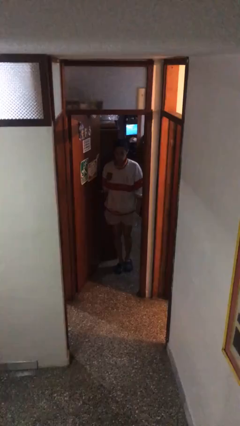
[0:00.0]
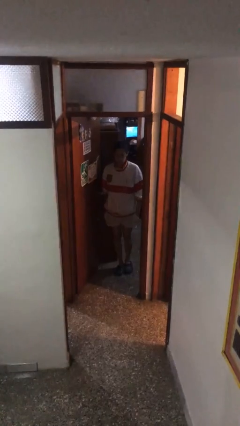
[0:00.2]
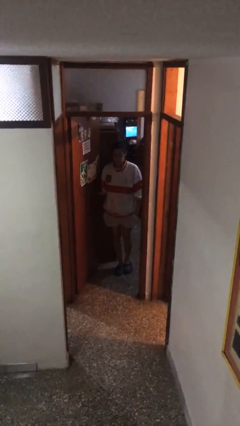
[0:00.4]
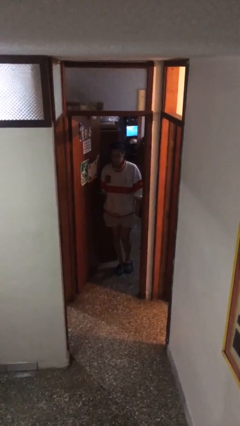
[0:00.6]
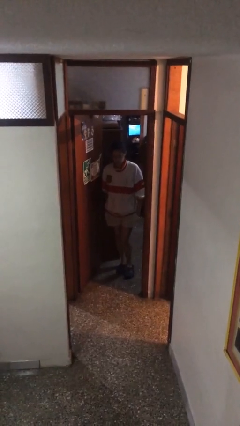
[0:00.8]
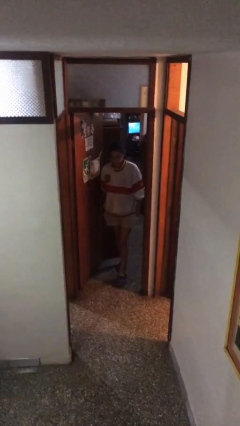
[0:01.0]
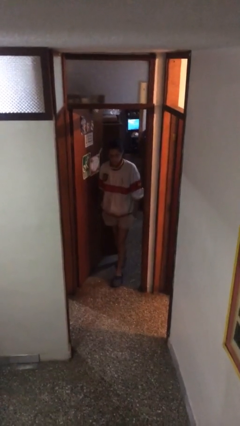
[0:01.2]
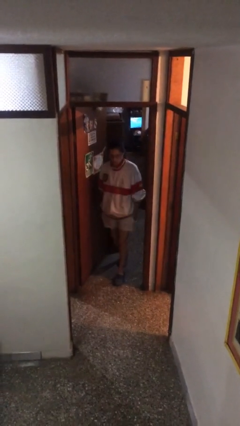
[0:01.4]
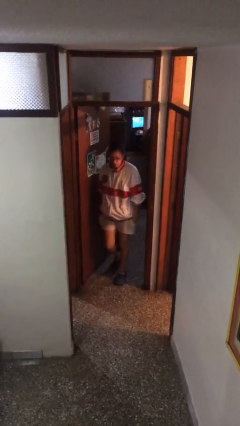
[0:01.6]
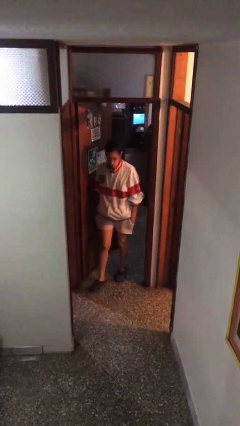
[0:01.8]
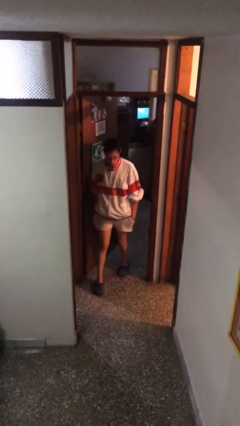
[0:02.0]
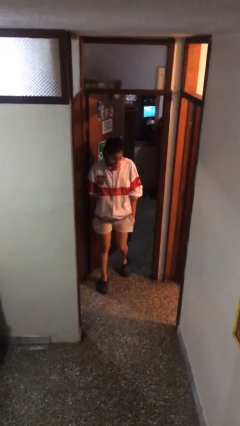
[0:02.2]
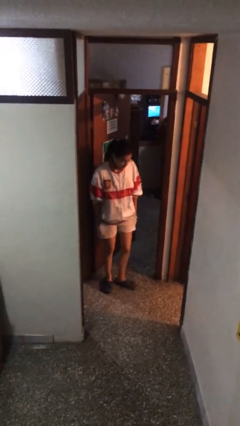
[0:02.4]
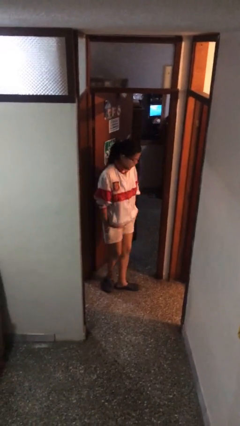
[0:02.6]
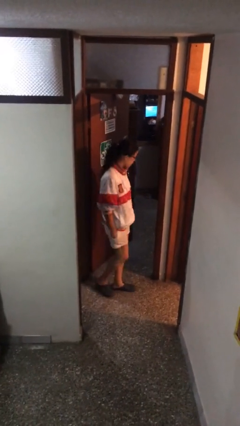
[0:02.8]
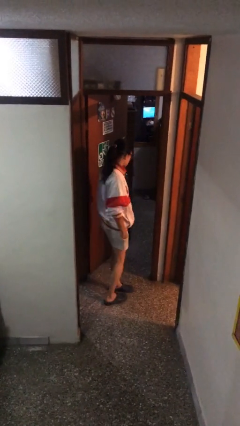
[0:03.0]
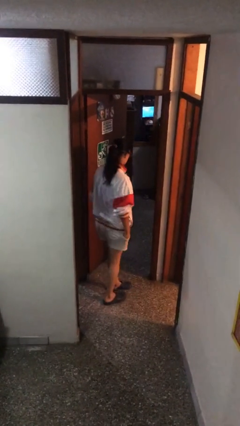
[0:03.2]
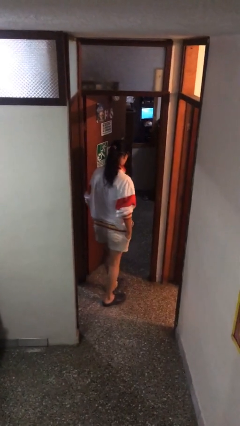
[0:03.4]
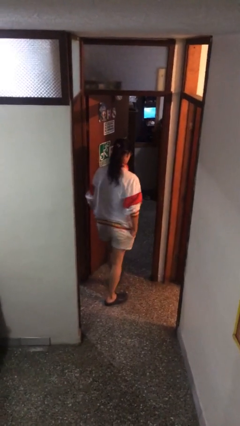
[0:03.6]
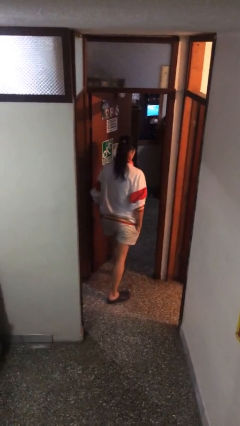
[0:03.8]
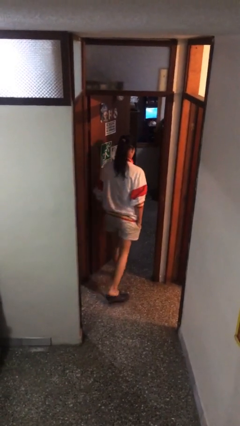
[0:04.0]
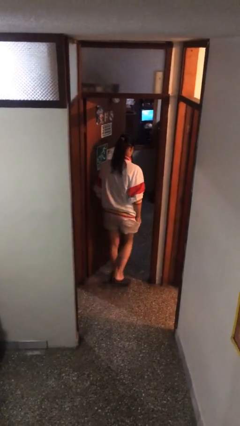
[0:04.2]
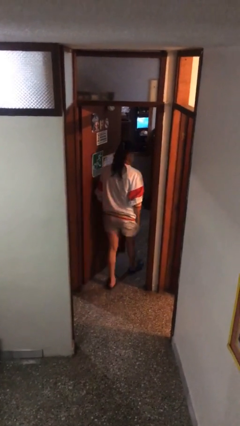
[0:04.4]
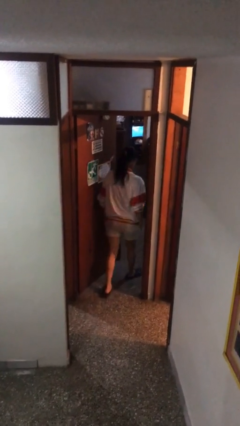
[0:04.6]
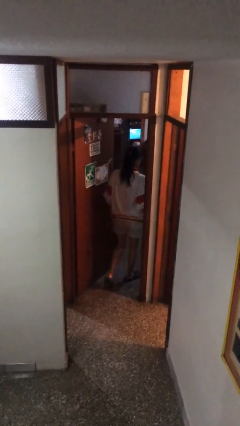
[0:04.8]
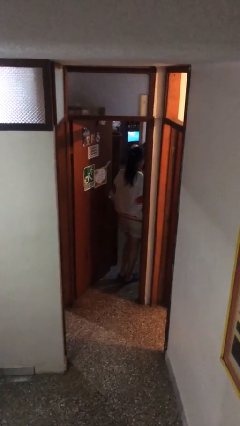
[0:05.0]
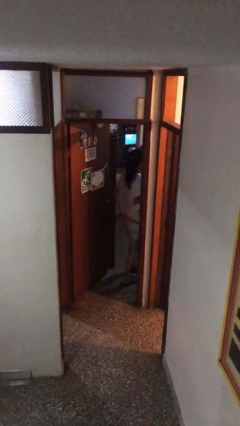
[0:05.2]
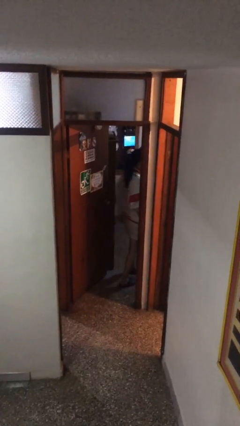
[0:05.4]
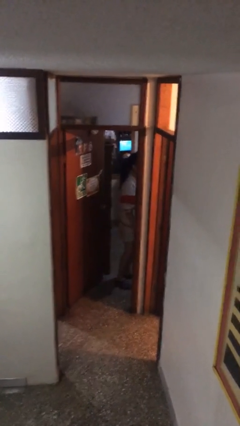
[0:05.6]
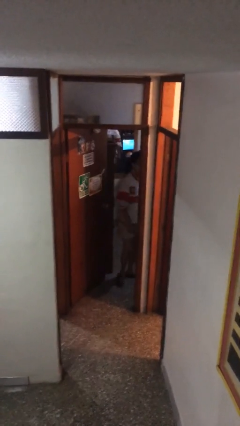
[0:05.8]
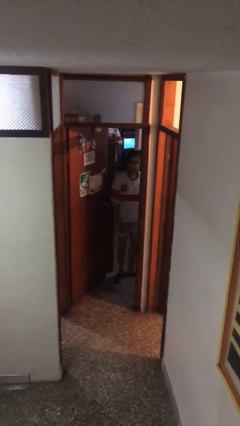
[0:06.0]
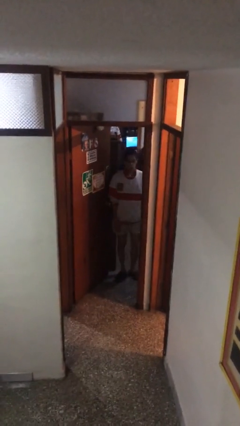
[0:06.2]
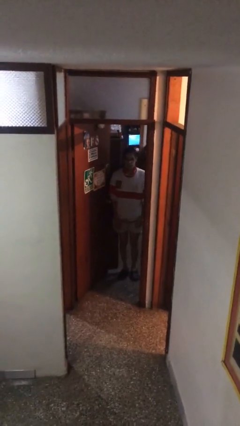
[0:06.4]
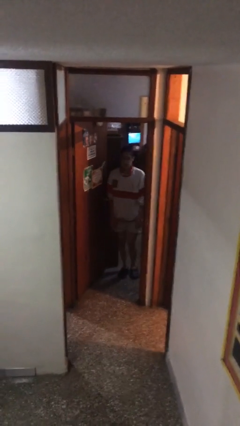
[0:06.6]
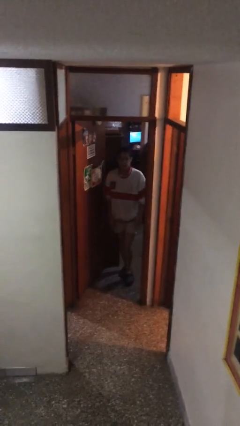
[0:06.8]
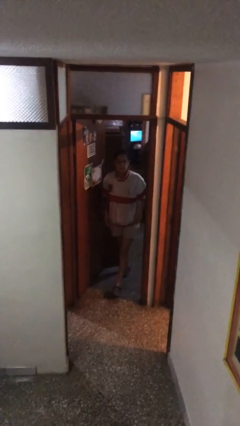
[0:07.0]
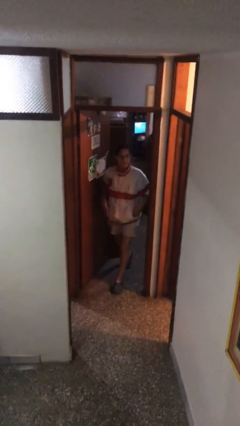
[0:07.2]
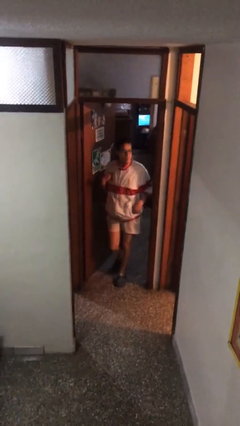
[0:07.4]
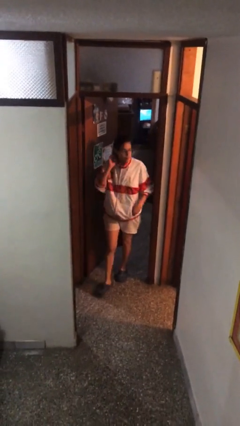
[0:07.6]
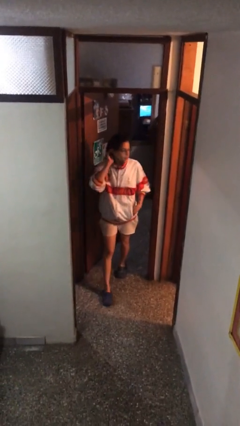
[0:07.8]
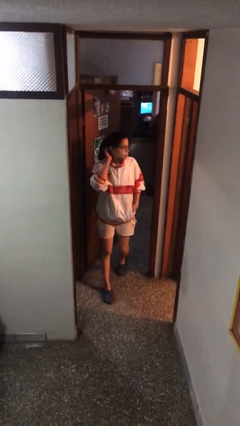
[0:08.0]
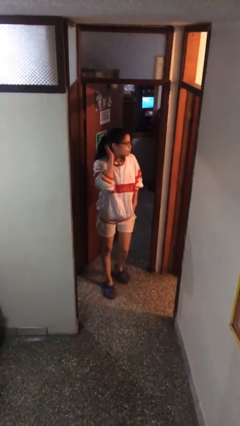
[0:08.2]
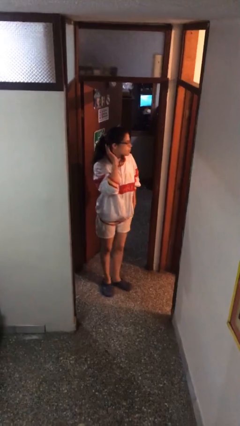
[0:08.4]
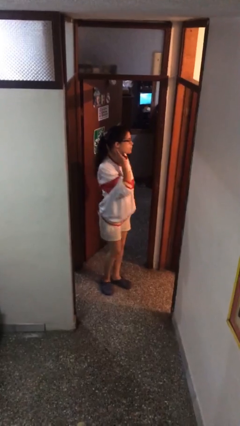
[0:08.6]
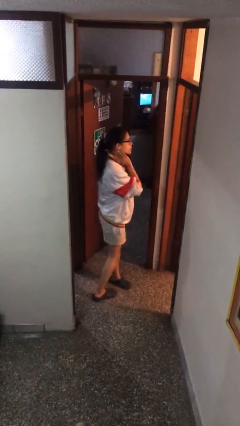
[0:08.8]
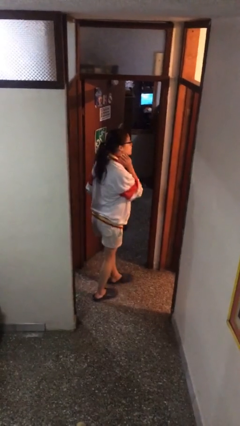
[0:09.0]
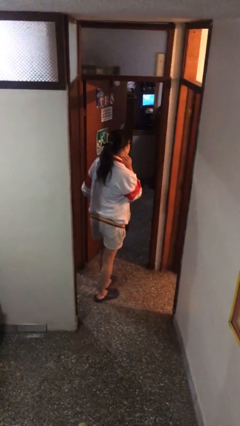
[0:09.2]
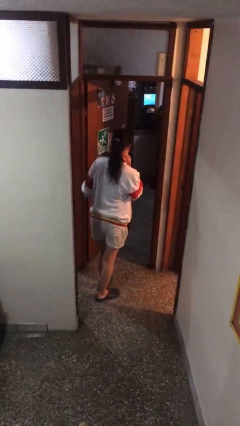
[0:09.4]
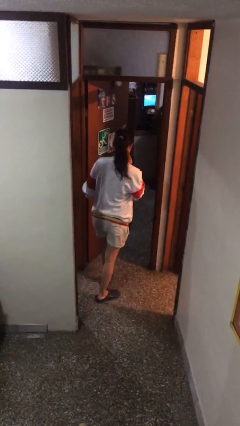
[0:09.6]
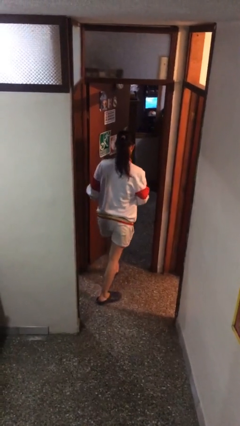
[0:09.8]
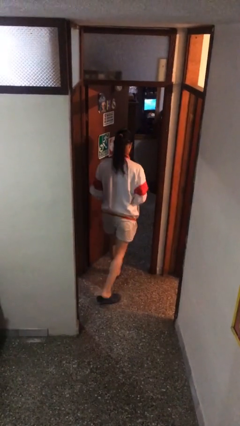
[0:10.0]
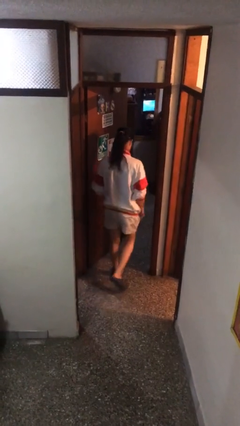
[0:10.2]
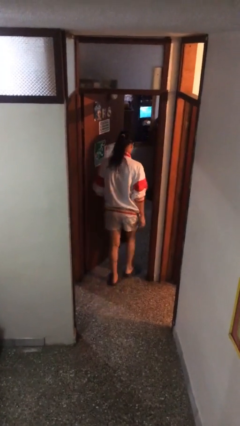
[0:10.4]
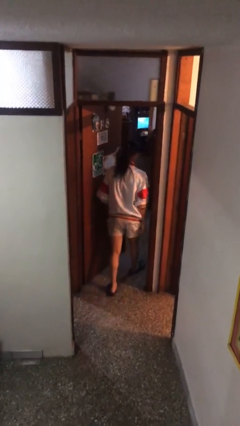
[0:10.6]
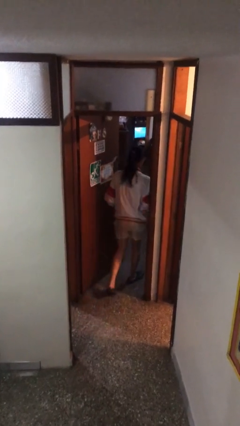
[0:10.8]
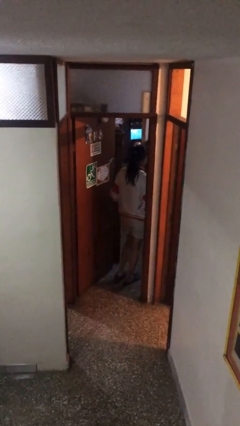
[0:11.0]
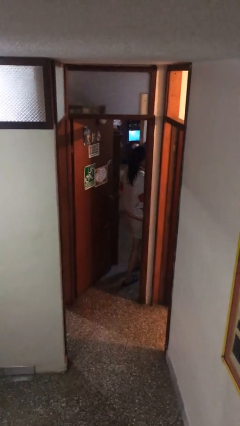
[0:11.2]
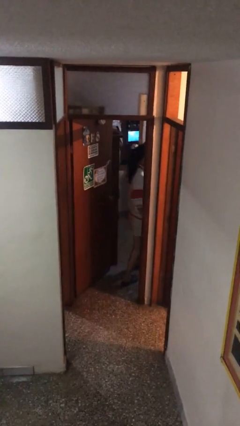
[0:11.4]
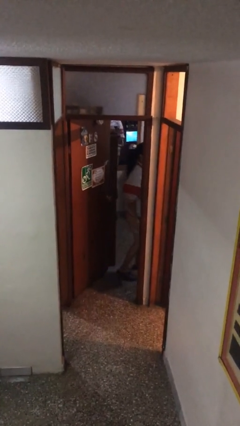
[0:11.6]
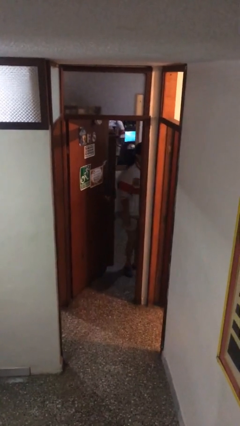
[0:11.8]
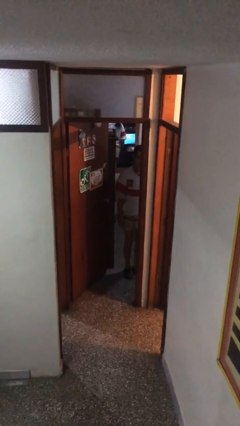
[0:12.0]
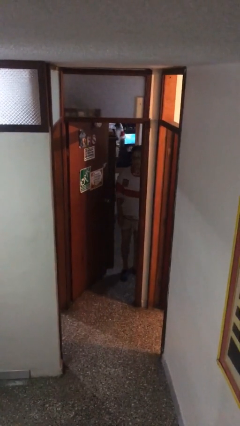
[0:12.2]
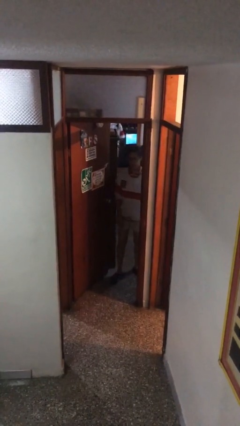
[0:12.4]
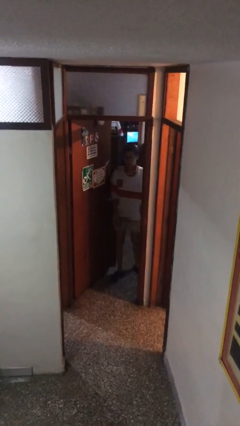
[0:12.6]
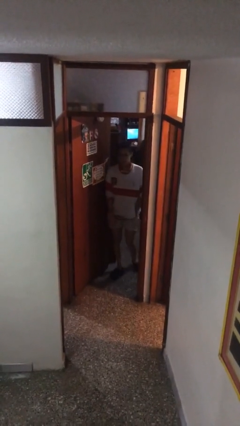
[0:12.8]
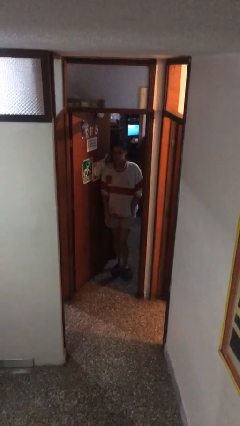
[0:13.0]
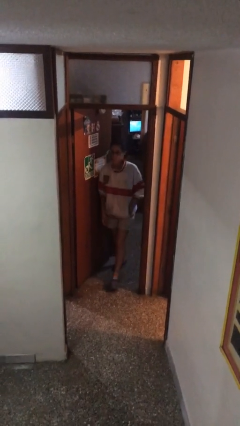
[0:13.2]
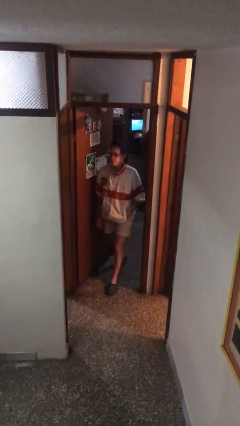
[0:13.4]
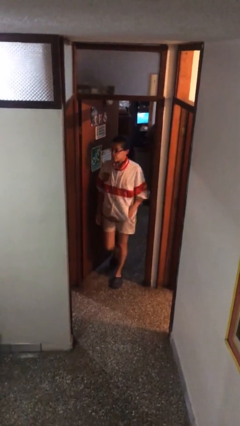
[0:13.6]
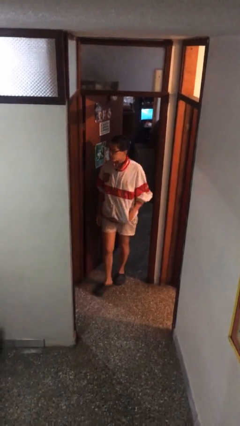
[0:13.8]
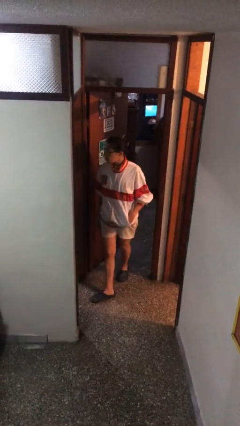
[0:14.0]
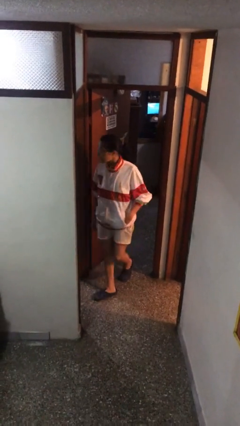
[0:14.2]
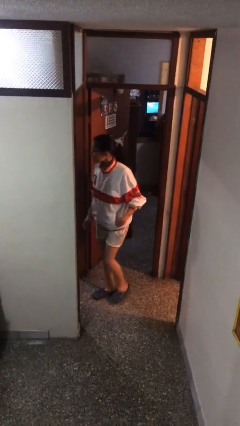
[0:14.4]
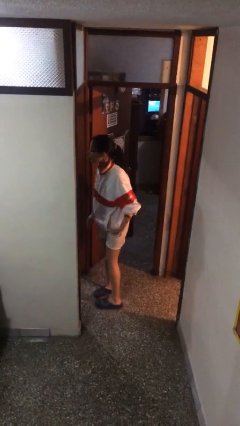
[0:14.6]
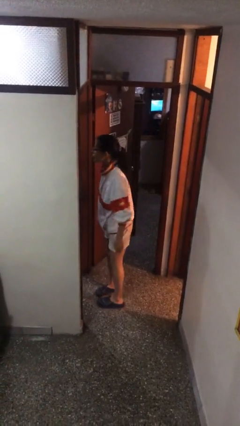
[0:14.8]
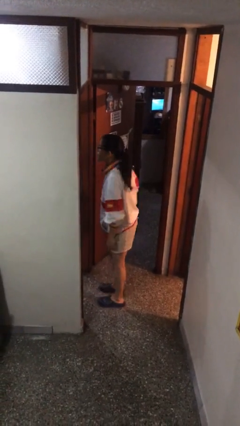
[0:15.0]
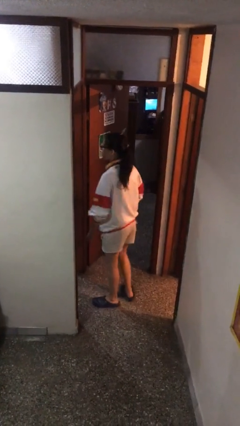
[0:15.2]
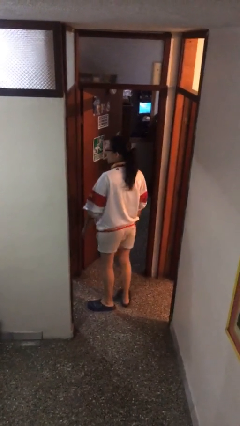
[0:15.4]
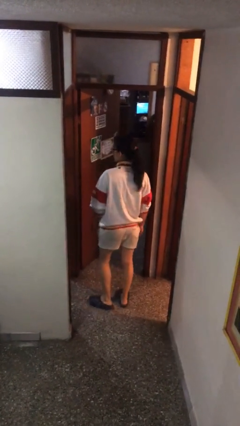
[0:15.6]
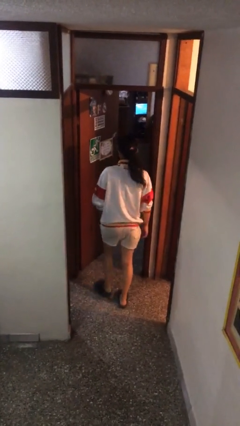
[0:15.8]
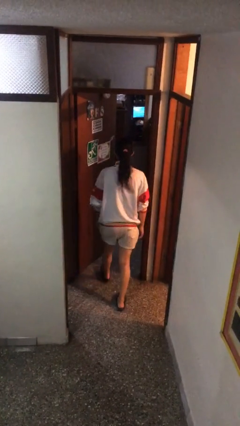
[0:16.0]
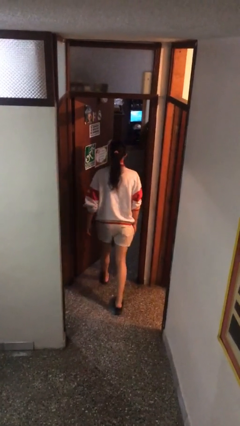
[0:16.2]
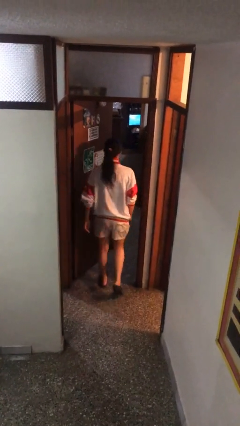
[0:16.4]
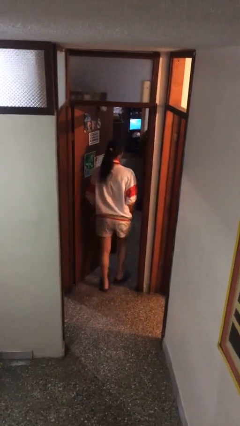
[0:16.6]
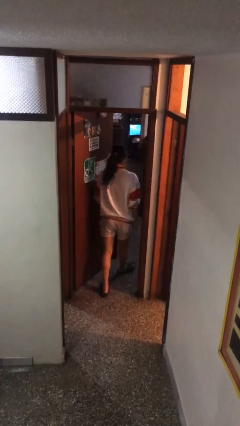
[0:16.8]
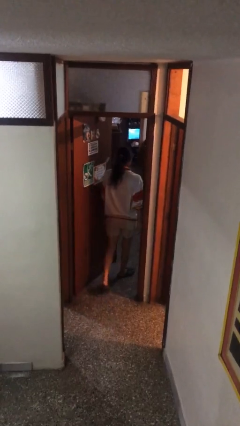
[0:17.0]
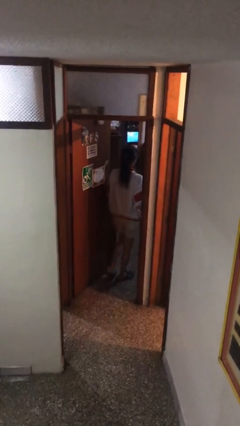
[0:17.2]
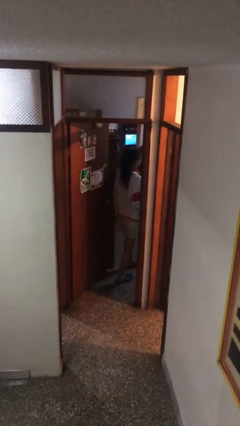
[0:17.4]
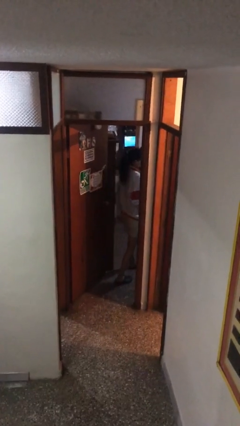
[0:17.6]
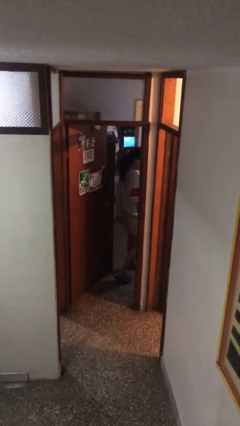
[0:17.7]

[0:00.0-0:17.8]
person texts on phone

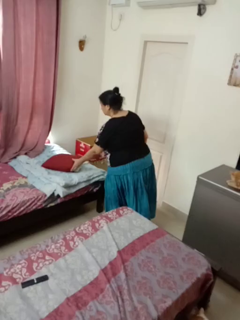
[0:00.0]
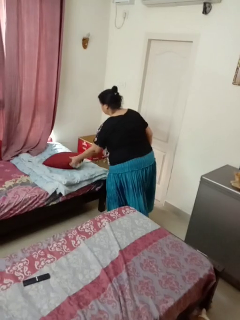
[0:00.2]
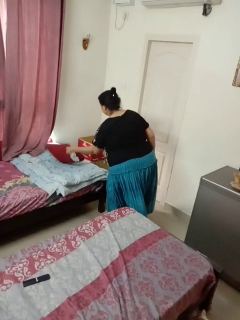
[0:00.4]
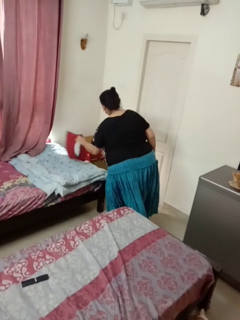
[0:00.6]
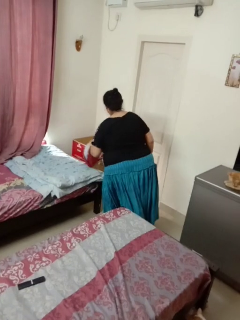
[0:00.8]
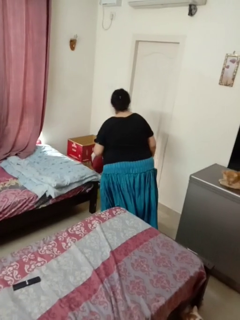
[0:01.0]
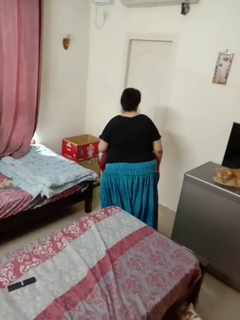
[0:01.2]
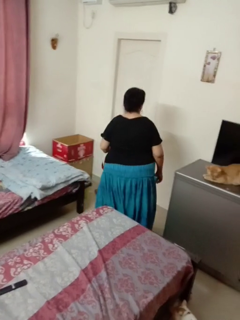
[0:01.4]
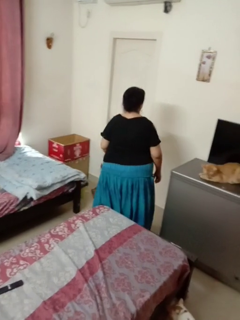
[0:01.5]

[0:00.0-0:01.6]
person picks up object from bed
